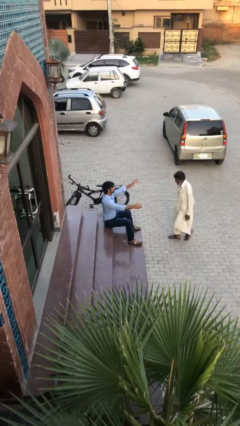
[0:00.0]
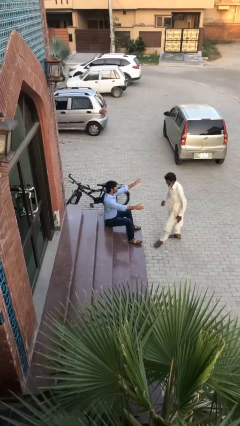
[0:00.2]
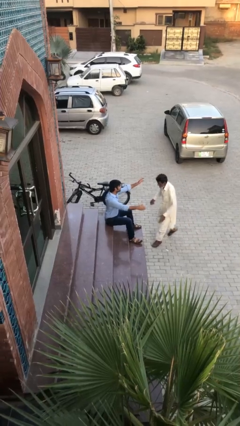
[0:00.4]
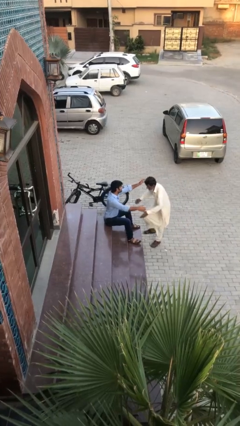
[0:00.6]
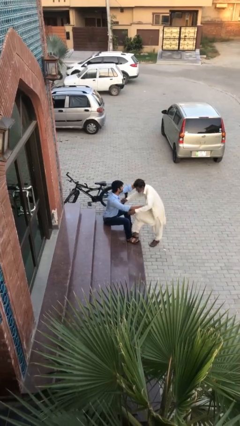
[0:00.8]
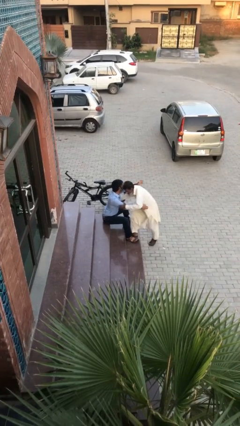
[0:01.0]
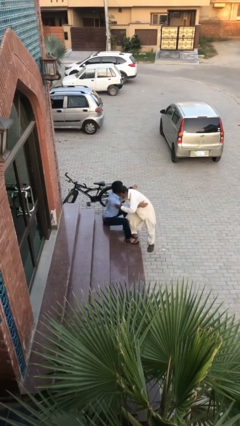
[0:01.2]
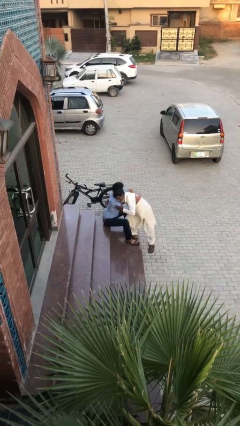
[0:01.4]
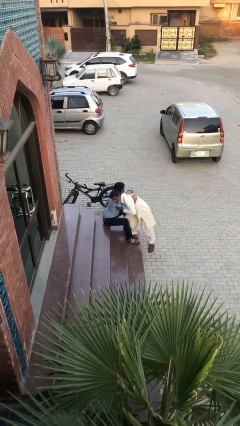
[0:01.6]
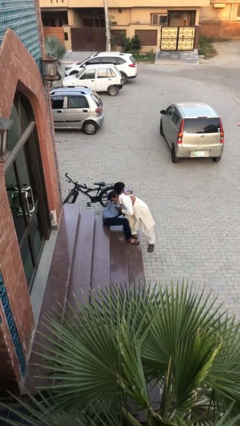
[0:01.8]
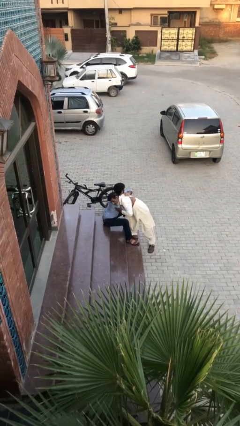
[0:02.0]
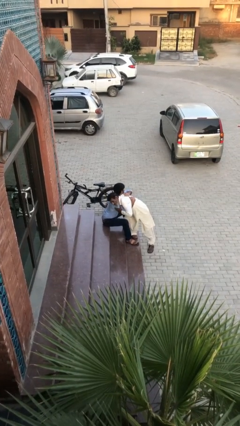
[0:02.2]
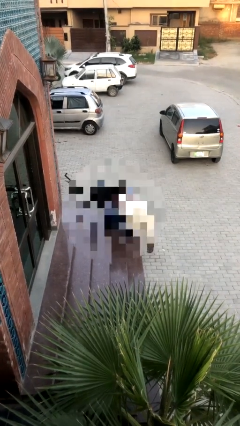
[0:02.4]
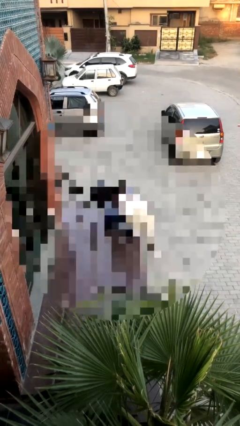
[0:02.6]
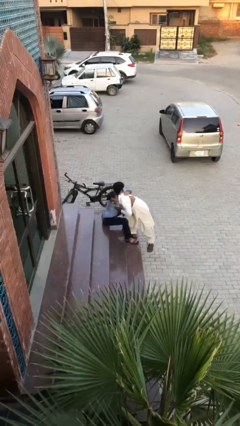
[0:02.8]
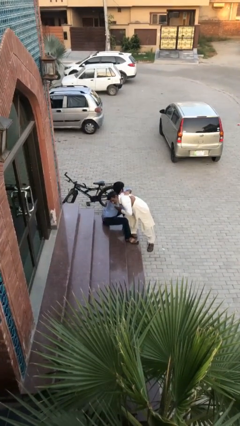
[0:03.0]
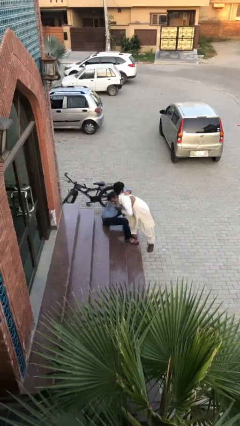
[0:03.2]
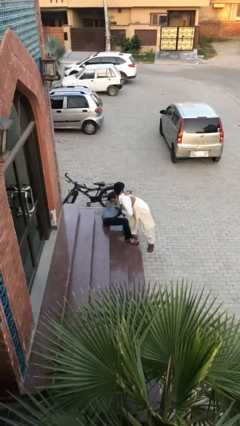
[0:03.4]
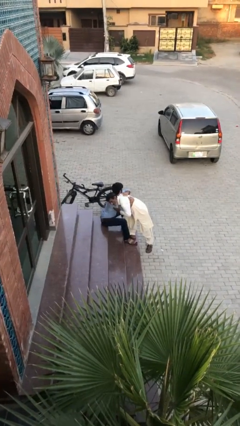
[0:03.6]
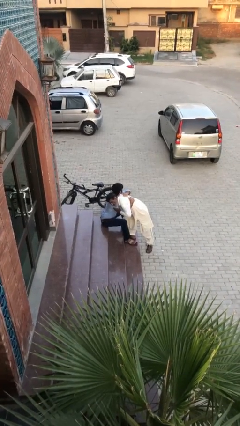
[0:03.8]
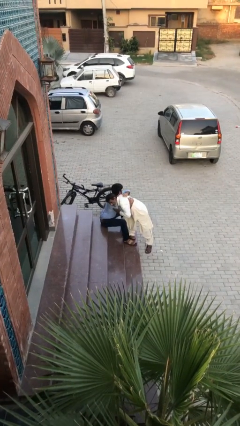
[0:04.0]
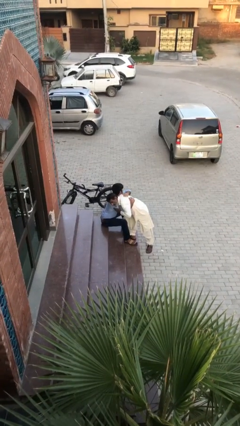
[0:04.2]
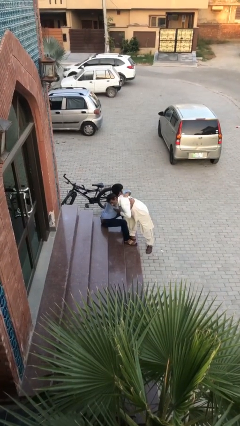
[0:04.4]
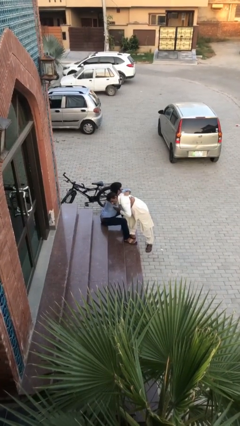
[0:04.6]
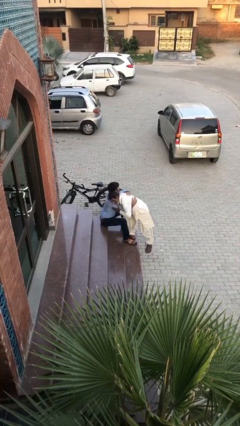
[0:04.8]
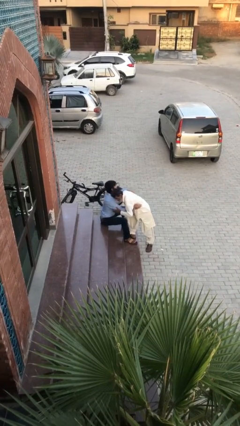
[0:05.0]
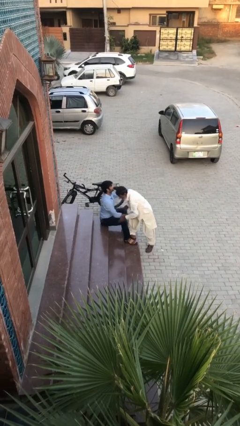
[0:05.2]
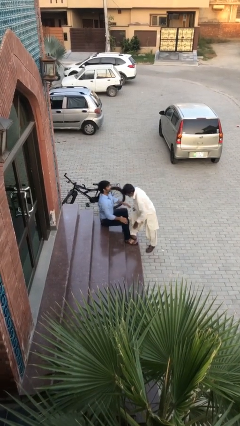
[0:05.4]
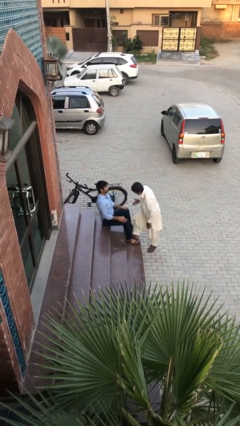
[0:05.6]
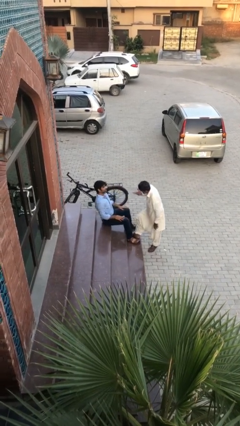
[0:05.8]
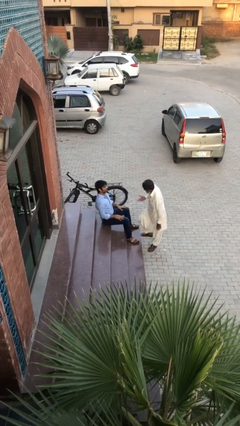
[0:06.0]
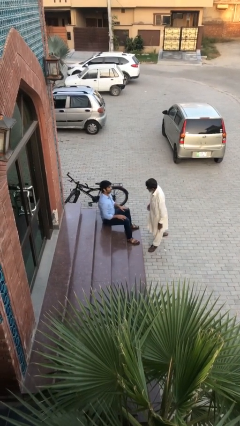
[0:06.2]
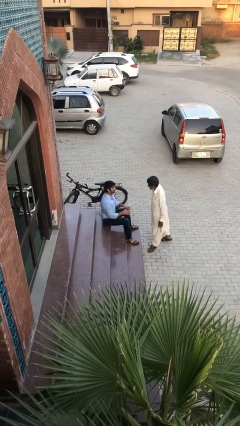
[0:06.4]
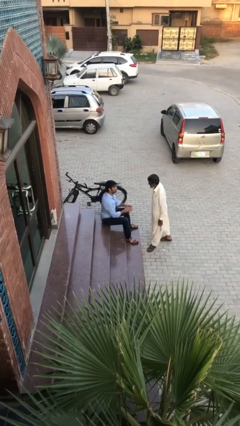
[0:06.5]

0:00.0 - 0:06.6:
person embraces person

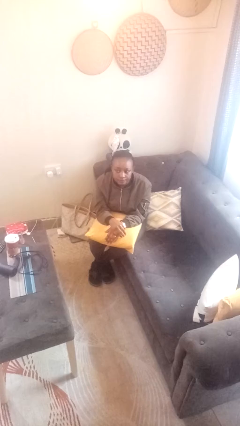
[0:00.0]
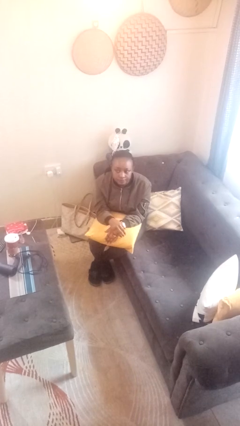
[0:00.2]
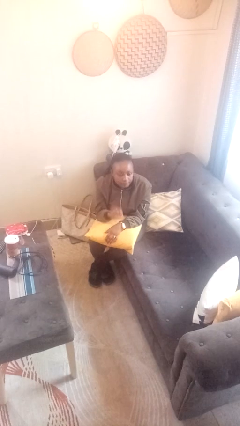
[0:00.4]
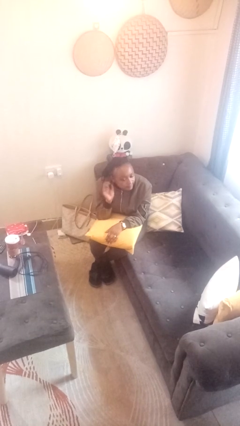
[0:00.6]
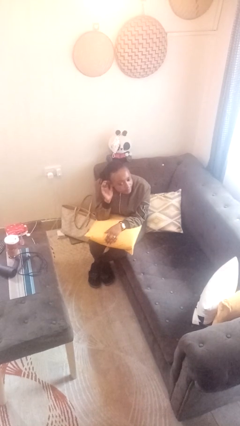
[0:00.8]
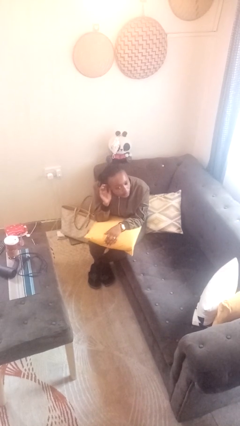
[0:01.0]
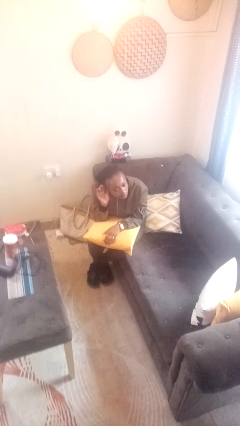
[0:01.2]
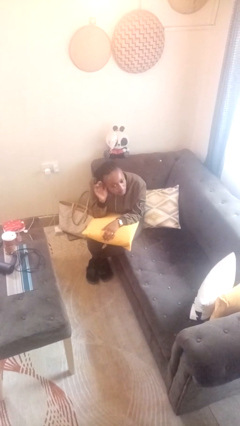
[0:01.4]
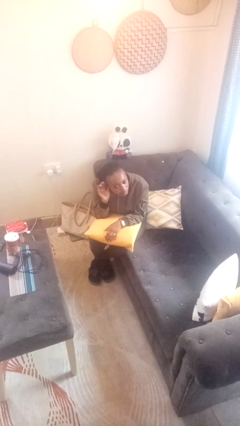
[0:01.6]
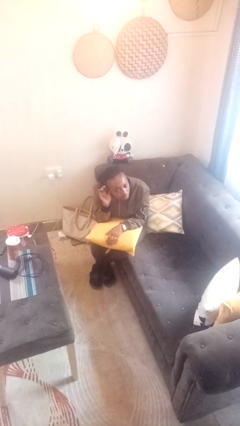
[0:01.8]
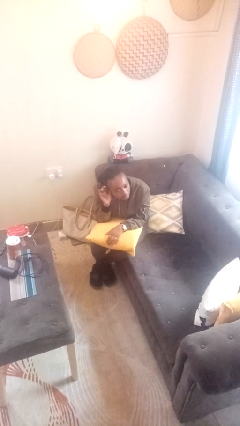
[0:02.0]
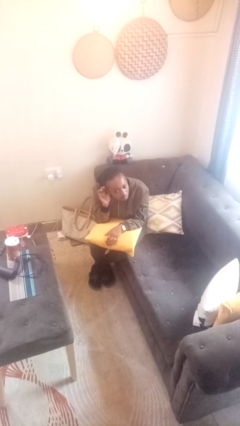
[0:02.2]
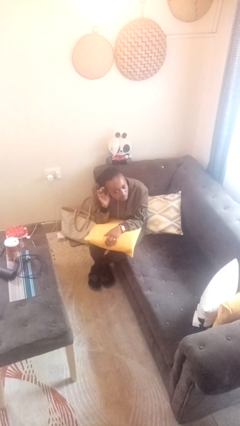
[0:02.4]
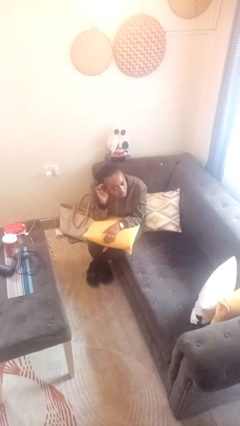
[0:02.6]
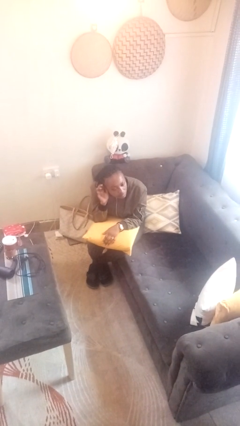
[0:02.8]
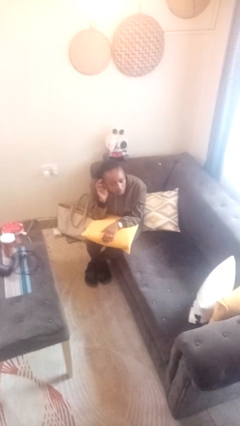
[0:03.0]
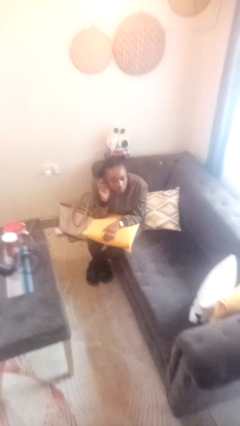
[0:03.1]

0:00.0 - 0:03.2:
person gestures listen closely

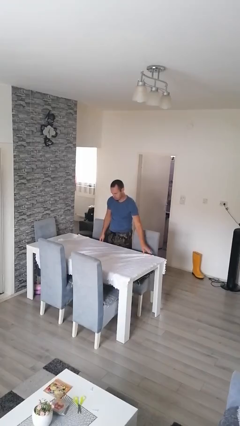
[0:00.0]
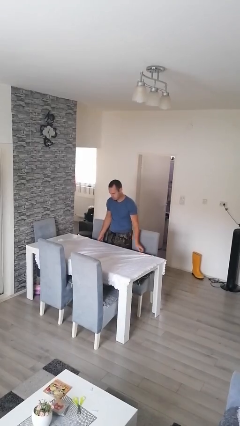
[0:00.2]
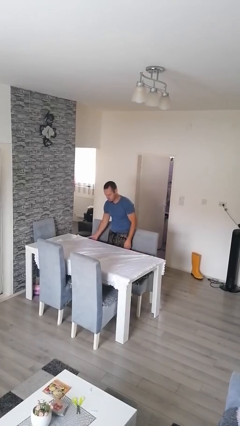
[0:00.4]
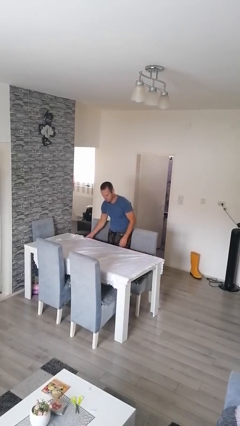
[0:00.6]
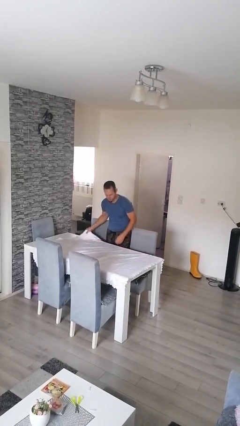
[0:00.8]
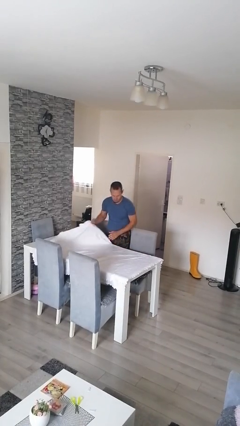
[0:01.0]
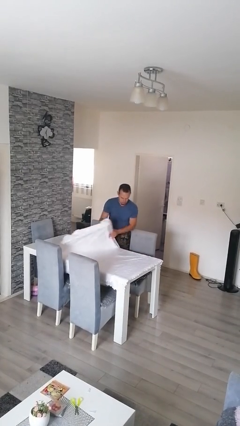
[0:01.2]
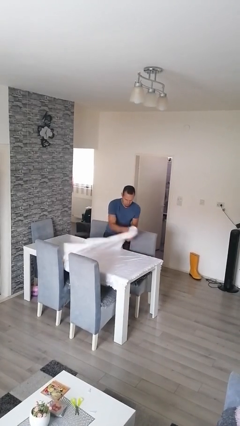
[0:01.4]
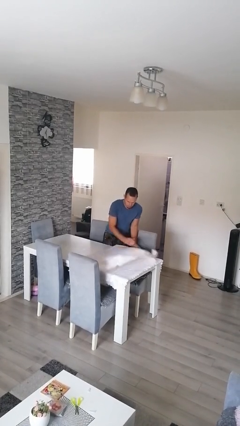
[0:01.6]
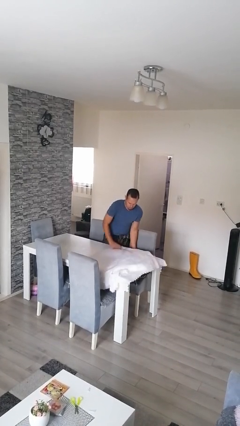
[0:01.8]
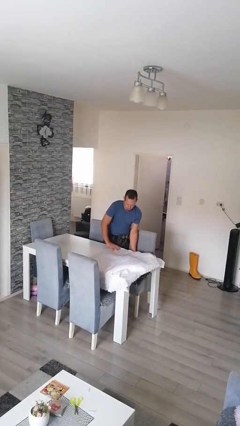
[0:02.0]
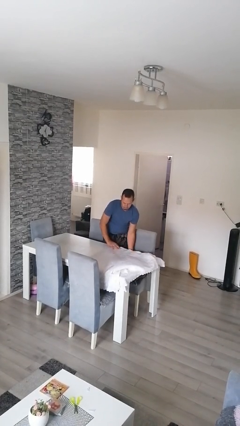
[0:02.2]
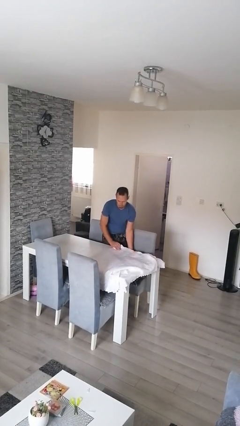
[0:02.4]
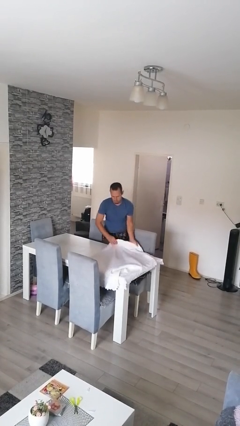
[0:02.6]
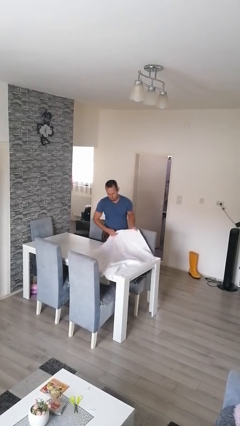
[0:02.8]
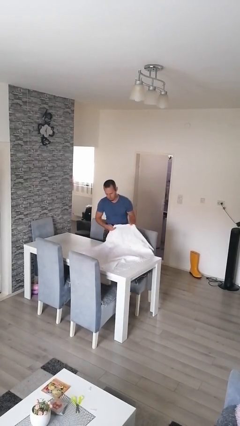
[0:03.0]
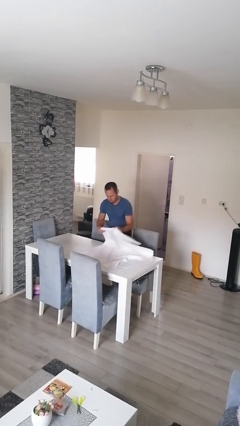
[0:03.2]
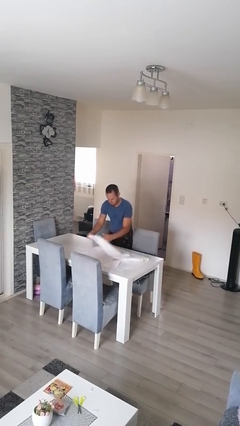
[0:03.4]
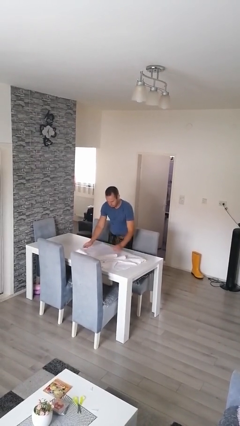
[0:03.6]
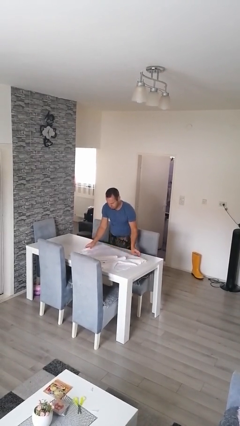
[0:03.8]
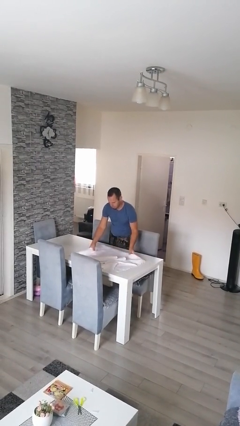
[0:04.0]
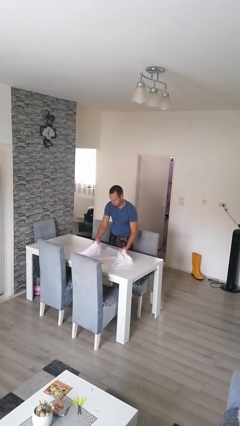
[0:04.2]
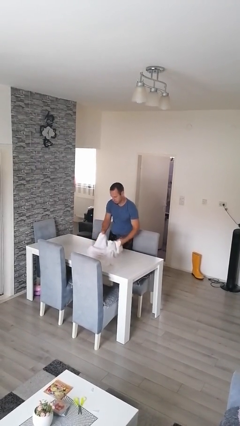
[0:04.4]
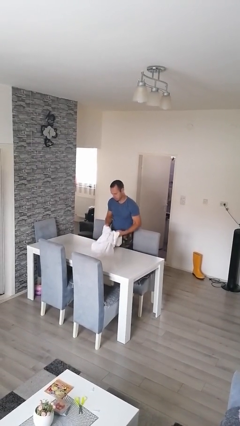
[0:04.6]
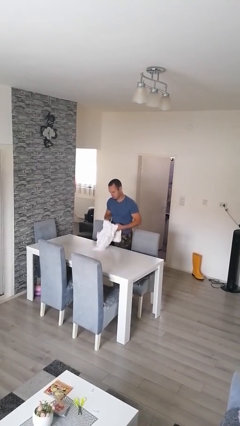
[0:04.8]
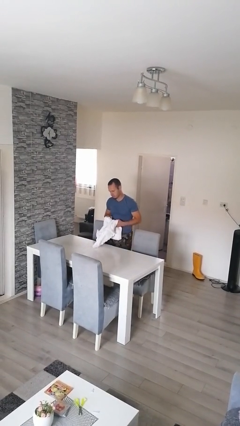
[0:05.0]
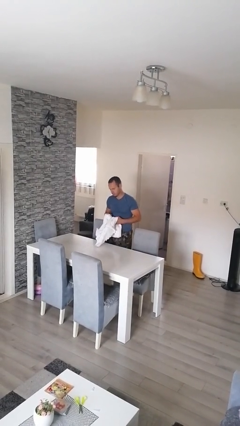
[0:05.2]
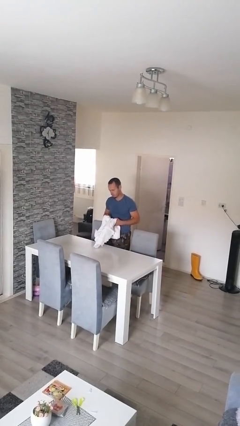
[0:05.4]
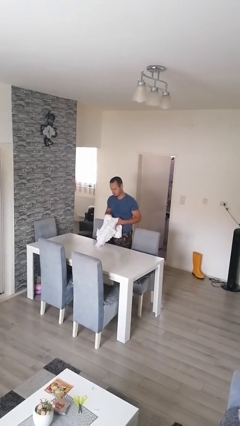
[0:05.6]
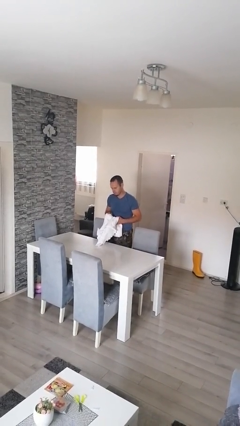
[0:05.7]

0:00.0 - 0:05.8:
person folds tablecloth

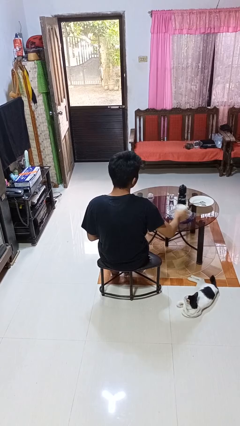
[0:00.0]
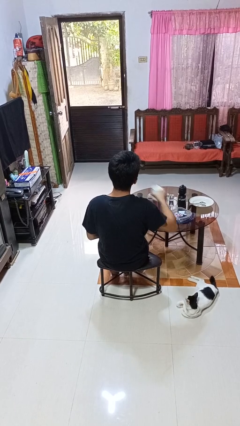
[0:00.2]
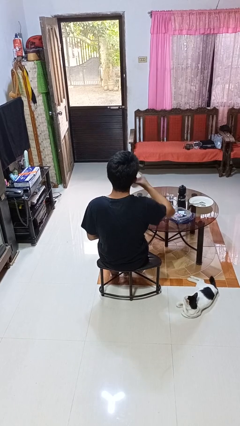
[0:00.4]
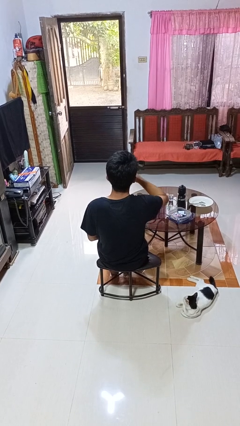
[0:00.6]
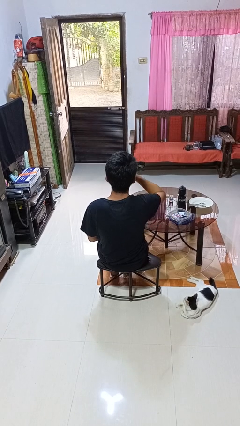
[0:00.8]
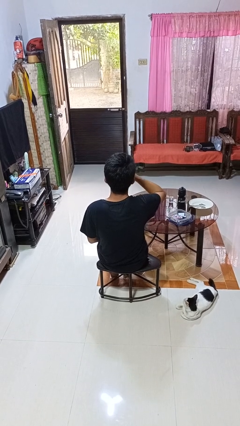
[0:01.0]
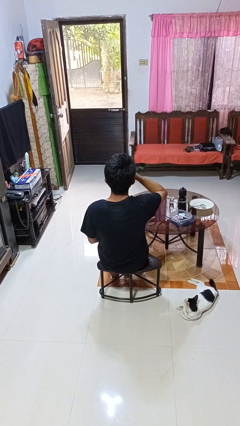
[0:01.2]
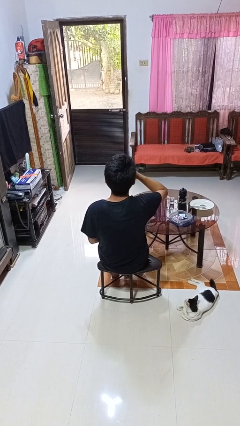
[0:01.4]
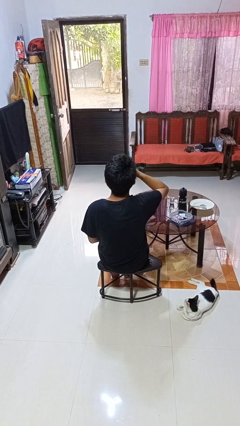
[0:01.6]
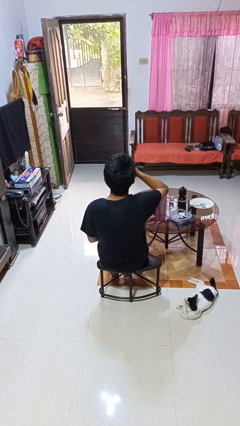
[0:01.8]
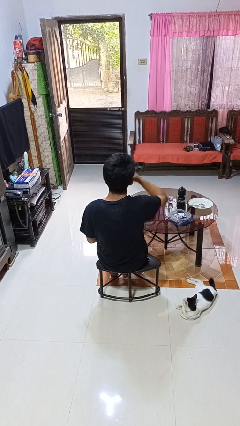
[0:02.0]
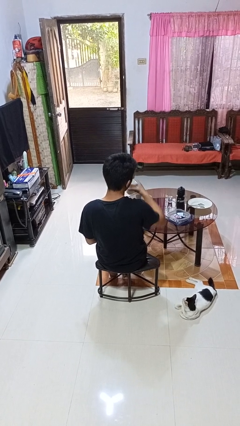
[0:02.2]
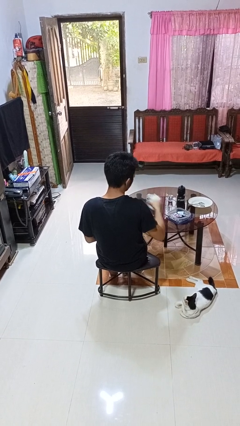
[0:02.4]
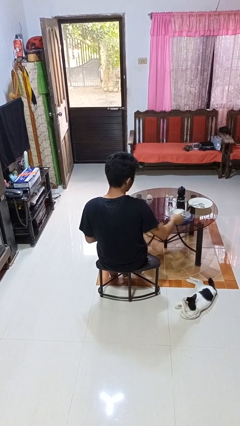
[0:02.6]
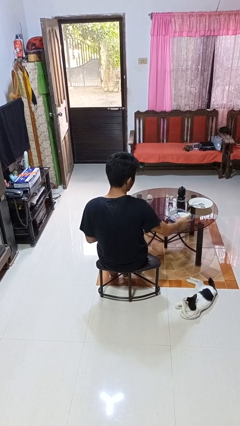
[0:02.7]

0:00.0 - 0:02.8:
person drinks from cup
